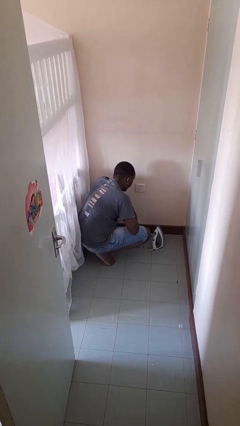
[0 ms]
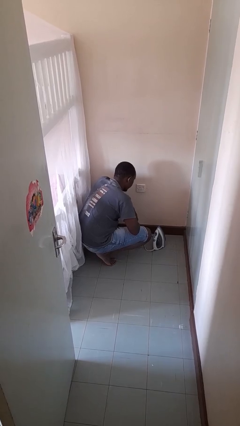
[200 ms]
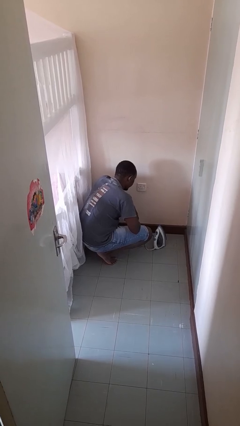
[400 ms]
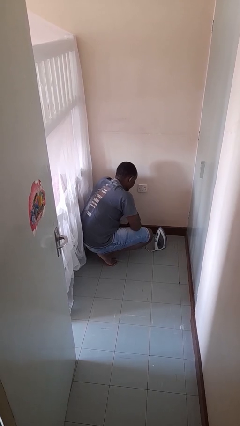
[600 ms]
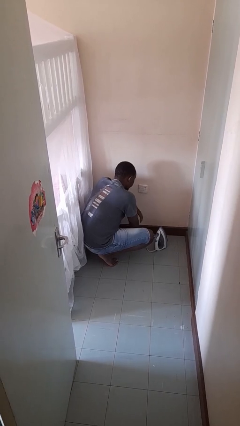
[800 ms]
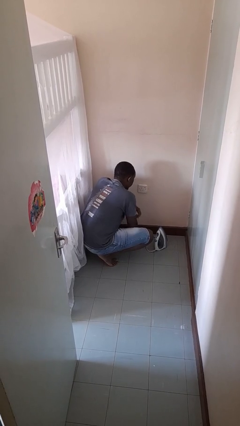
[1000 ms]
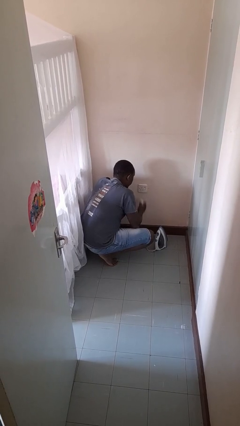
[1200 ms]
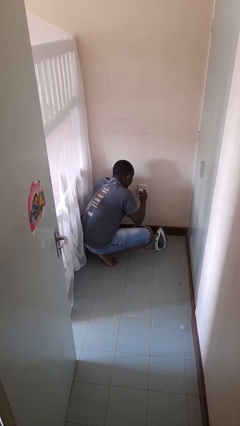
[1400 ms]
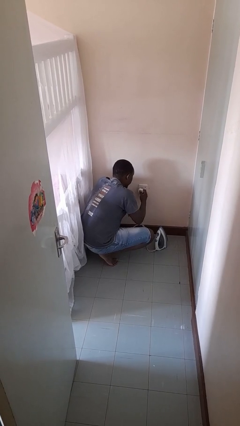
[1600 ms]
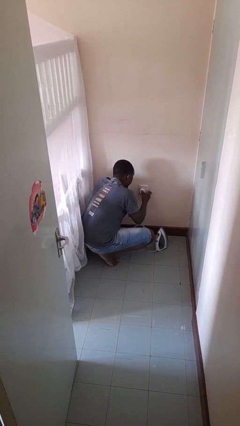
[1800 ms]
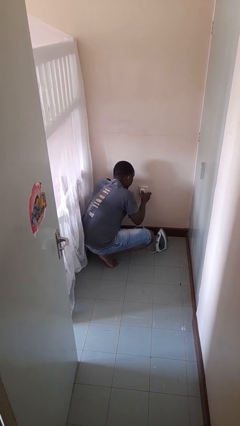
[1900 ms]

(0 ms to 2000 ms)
person plugs into electrical socket

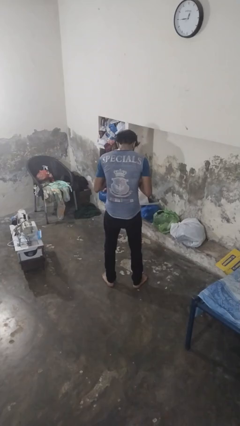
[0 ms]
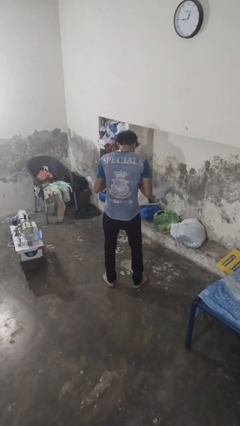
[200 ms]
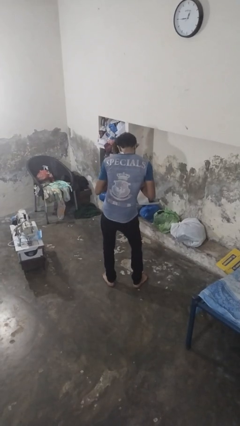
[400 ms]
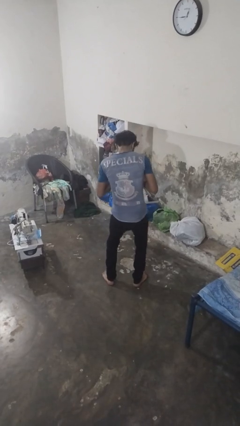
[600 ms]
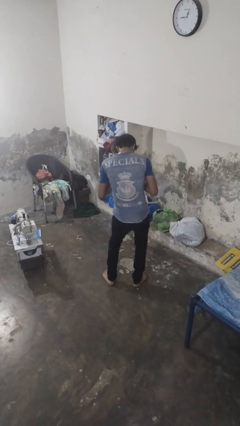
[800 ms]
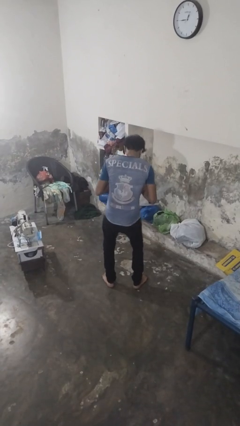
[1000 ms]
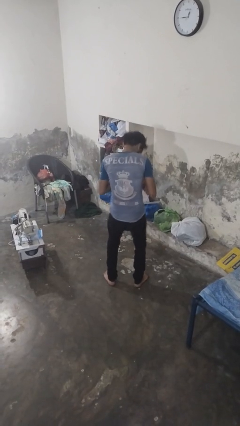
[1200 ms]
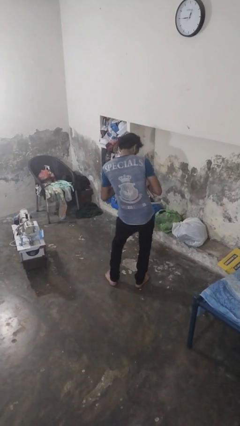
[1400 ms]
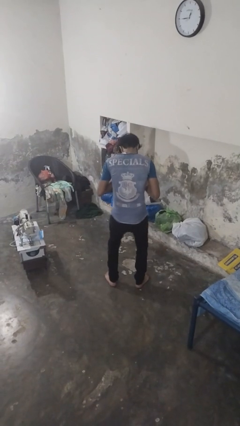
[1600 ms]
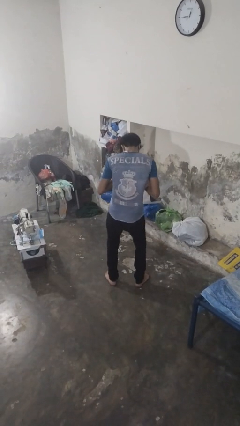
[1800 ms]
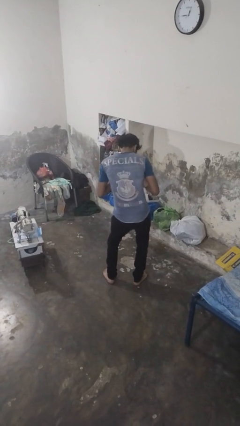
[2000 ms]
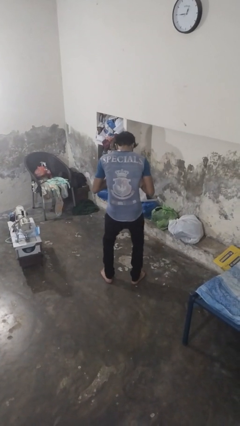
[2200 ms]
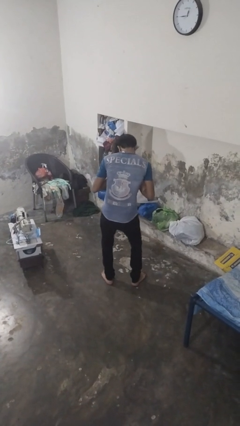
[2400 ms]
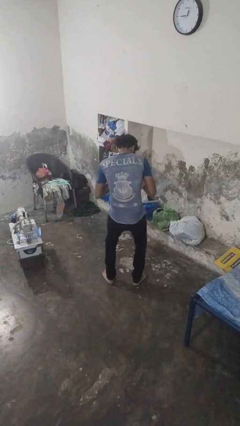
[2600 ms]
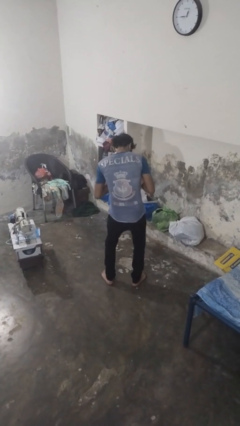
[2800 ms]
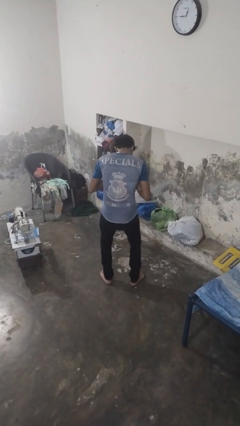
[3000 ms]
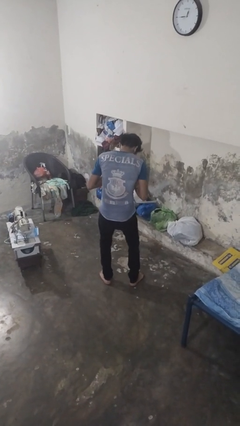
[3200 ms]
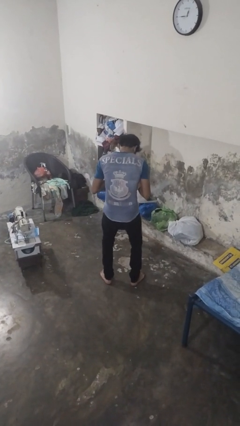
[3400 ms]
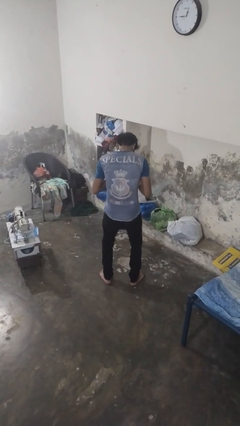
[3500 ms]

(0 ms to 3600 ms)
person wiggles hips

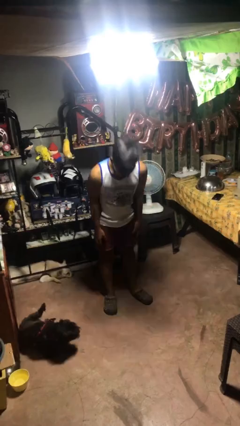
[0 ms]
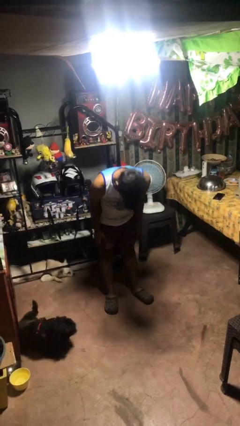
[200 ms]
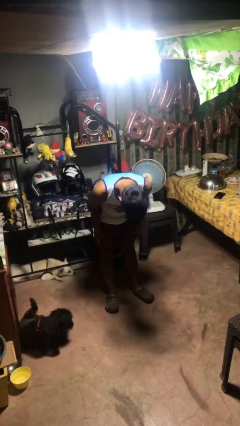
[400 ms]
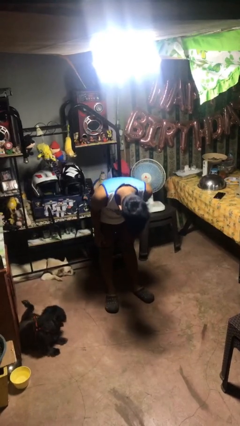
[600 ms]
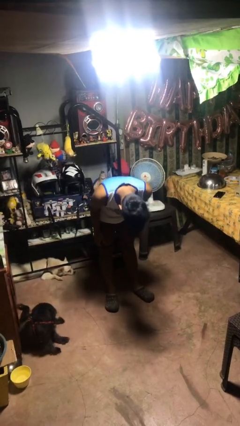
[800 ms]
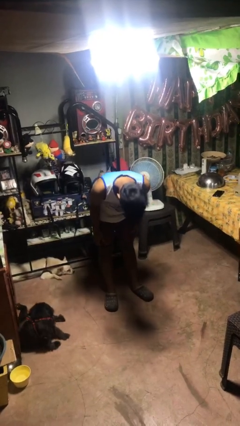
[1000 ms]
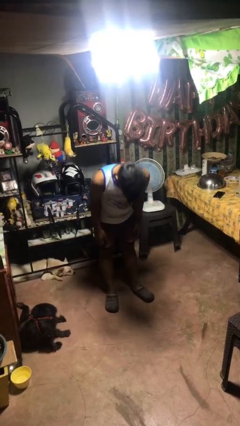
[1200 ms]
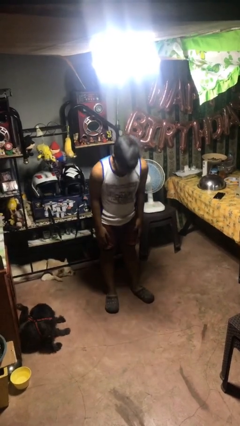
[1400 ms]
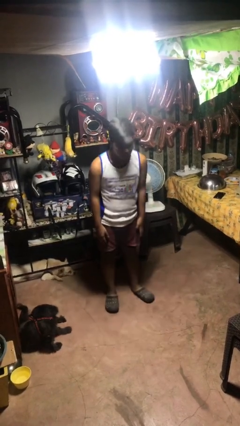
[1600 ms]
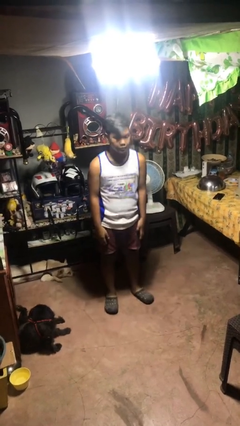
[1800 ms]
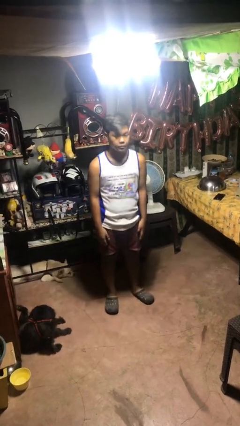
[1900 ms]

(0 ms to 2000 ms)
person bows

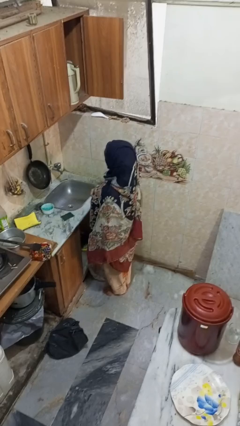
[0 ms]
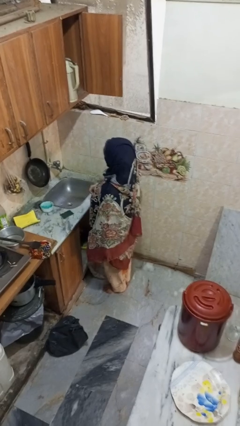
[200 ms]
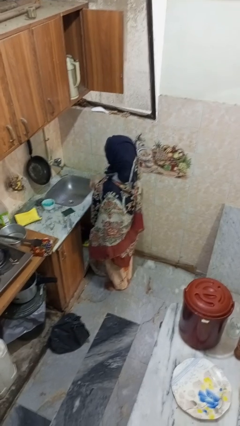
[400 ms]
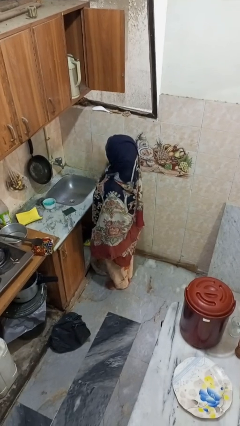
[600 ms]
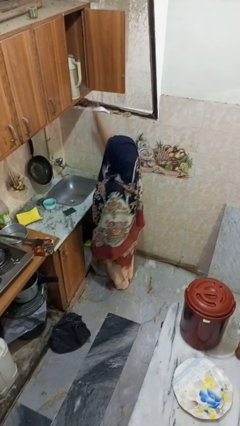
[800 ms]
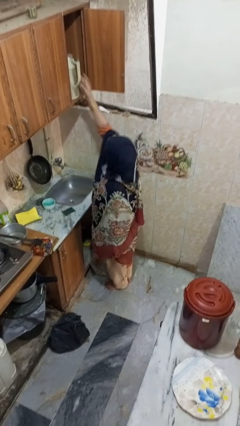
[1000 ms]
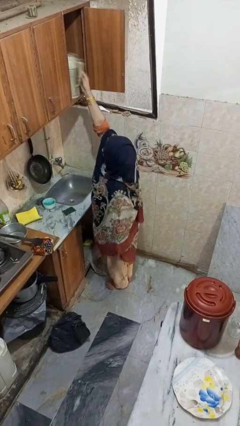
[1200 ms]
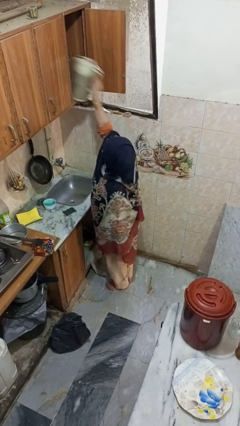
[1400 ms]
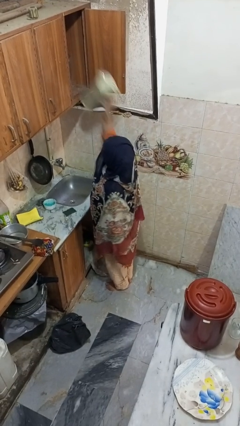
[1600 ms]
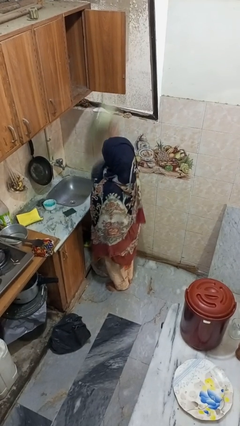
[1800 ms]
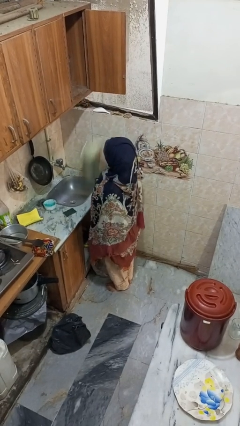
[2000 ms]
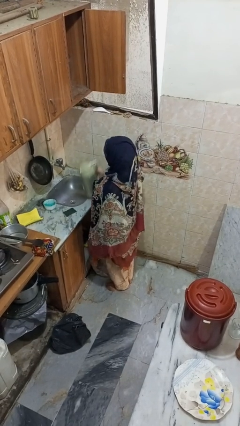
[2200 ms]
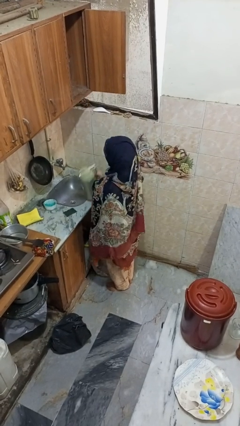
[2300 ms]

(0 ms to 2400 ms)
person puts object in cabinet

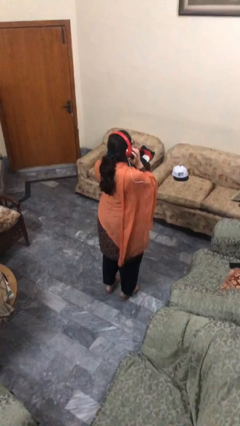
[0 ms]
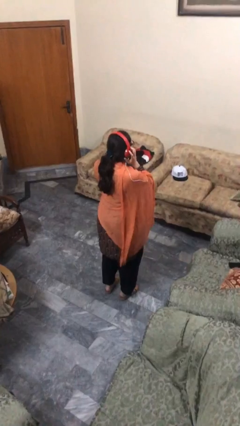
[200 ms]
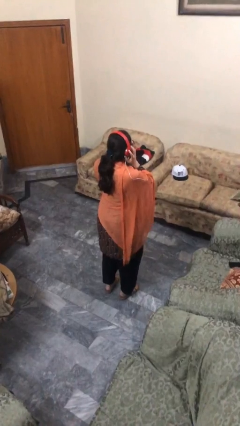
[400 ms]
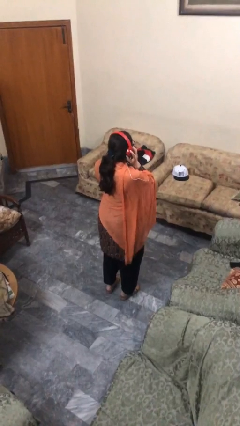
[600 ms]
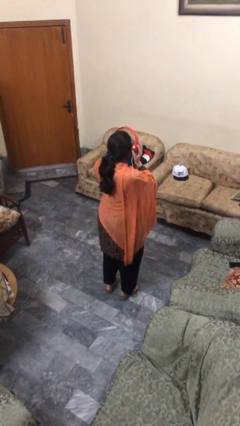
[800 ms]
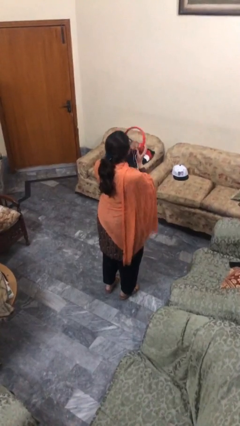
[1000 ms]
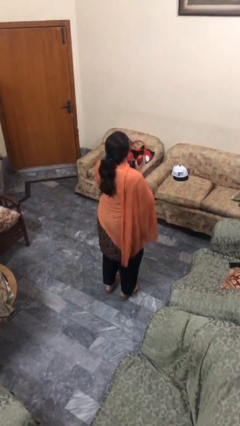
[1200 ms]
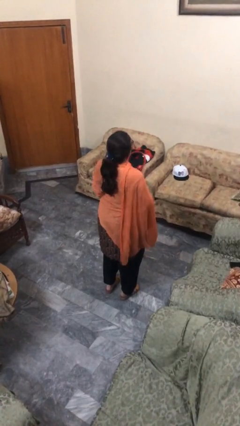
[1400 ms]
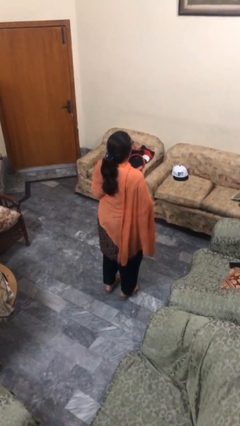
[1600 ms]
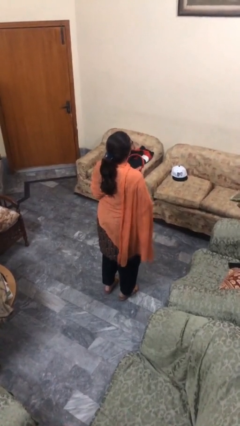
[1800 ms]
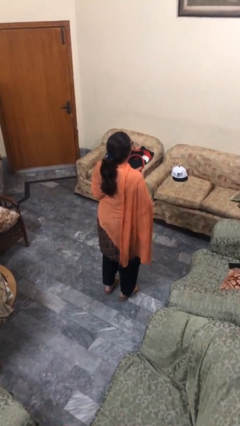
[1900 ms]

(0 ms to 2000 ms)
person takes off headphones

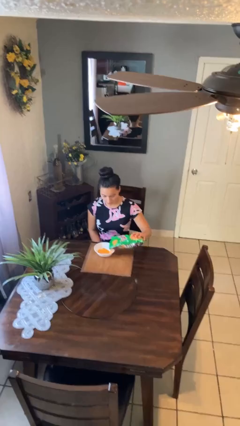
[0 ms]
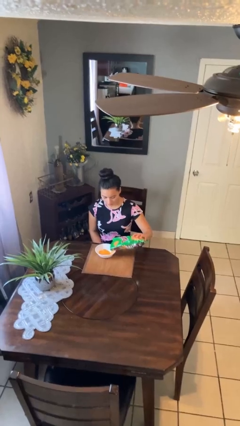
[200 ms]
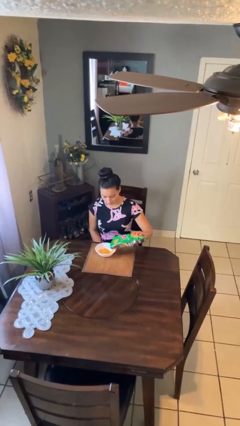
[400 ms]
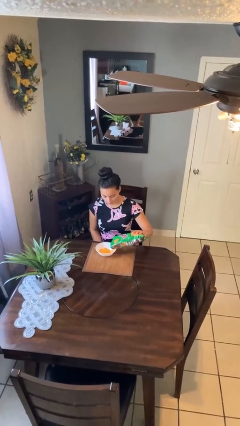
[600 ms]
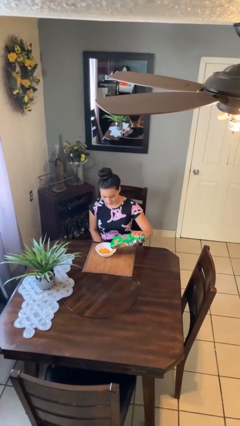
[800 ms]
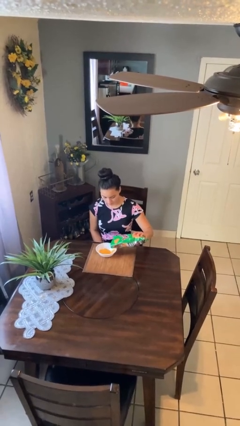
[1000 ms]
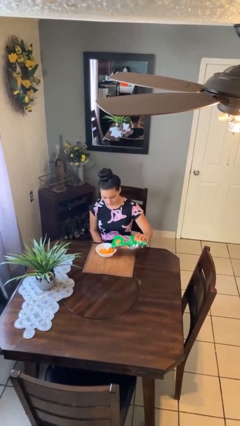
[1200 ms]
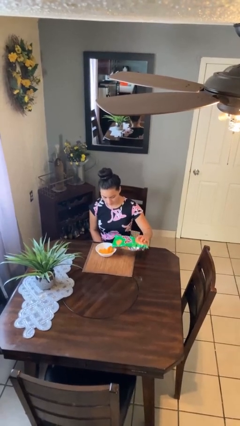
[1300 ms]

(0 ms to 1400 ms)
person pours into bowl

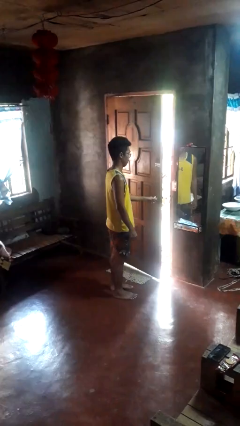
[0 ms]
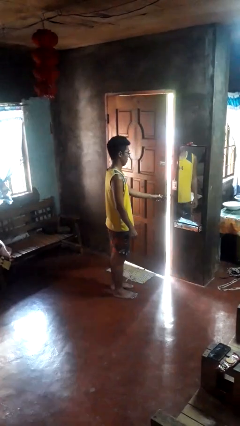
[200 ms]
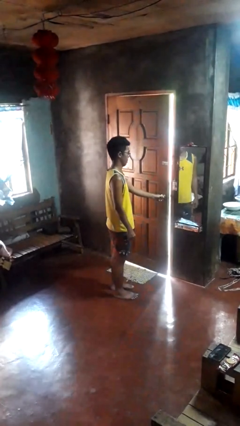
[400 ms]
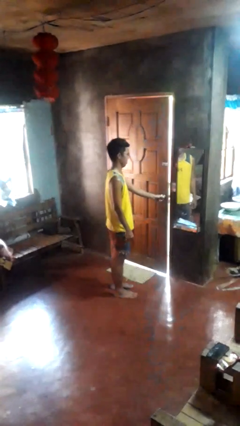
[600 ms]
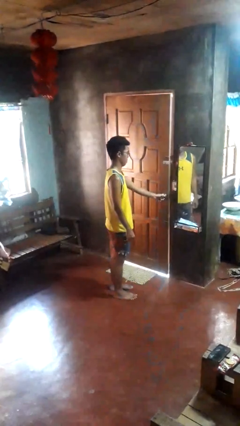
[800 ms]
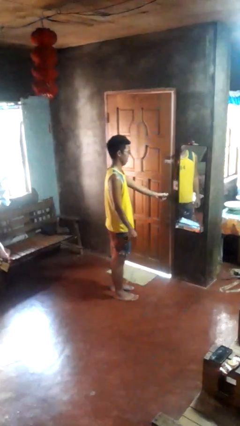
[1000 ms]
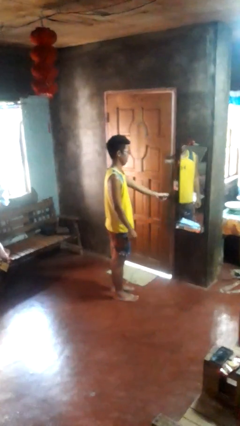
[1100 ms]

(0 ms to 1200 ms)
person closes facility door

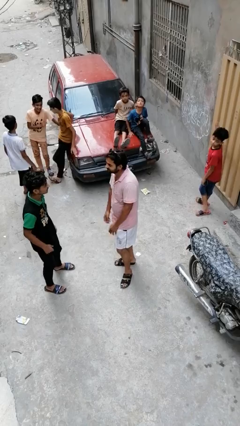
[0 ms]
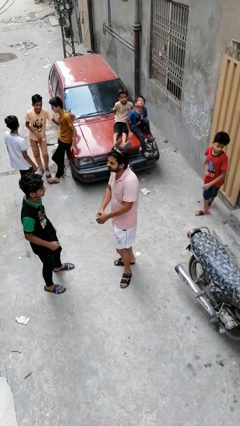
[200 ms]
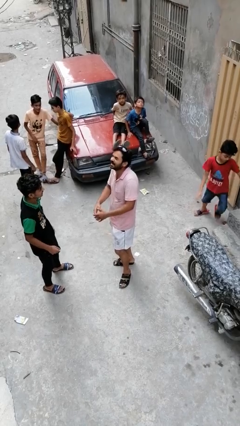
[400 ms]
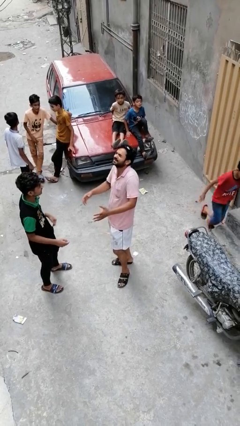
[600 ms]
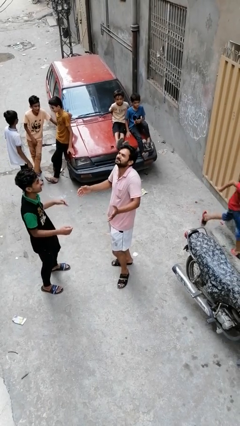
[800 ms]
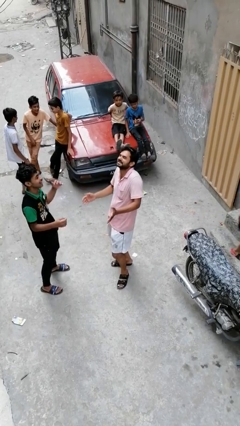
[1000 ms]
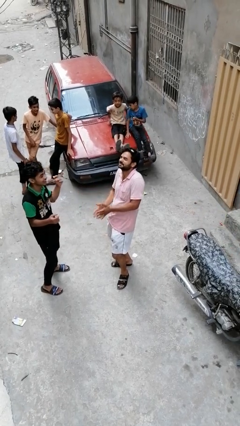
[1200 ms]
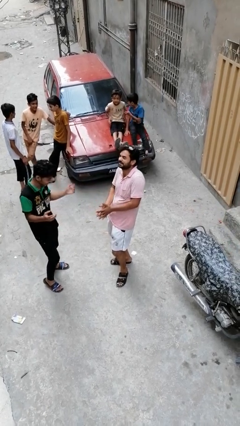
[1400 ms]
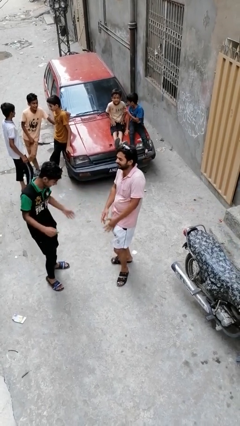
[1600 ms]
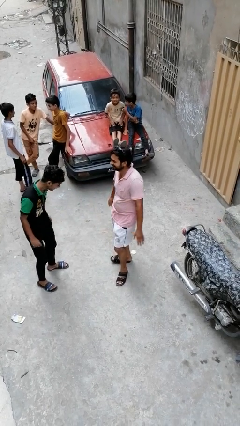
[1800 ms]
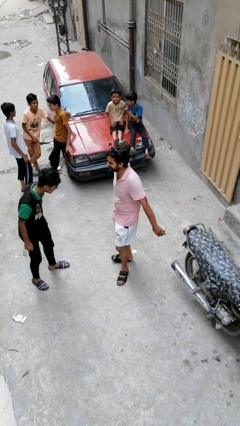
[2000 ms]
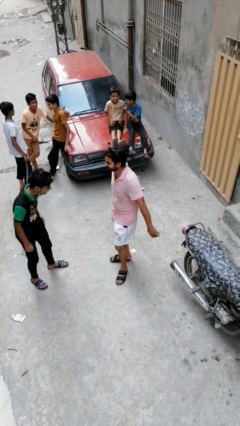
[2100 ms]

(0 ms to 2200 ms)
person laughs with person
